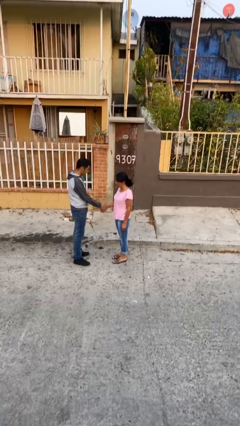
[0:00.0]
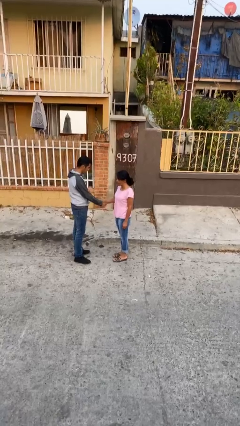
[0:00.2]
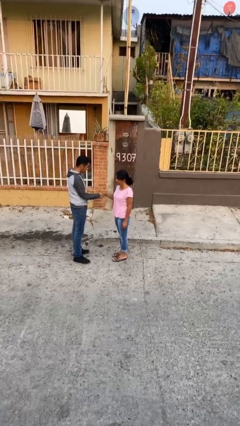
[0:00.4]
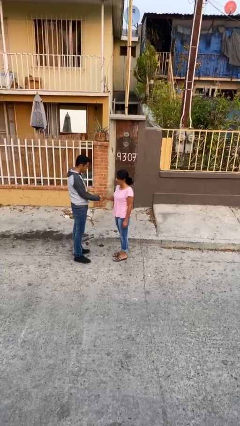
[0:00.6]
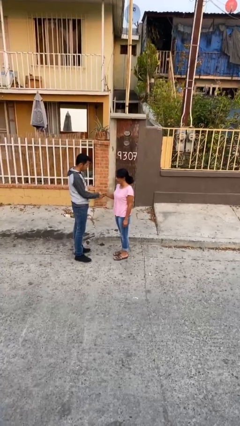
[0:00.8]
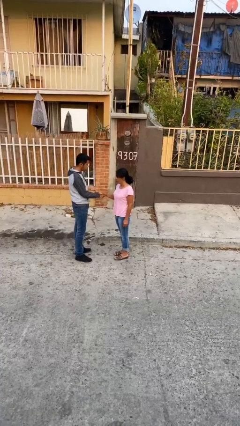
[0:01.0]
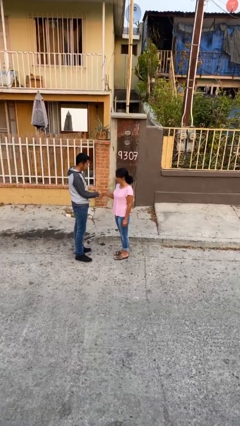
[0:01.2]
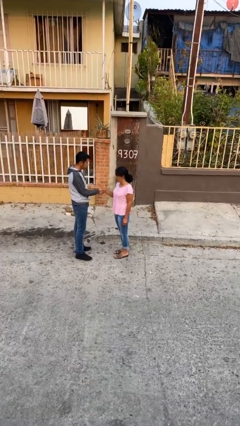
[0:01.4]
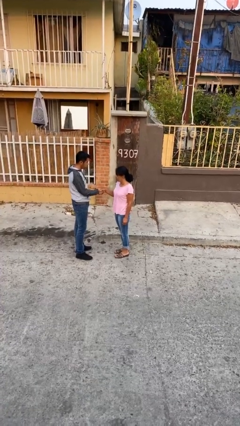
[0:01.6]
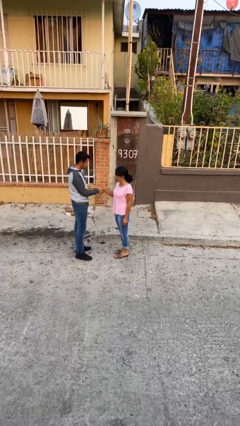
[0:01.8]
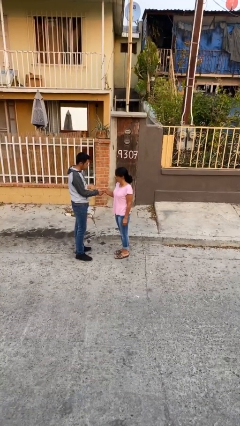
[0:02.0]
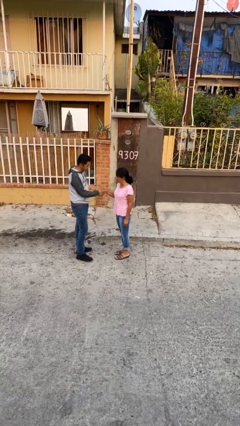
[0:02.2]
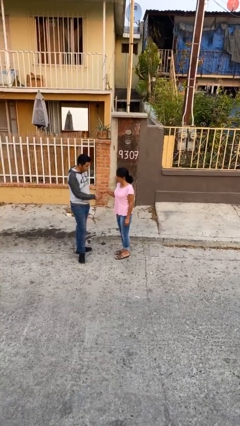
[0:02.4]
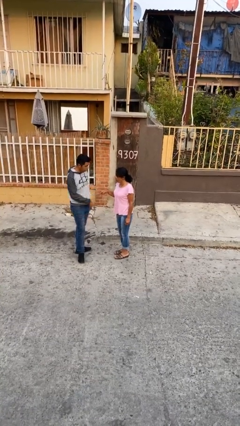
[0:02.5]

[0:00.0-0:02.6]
person shakes hand

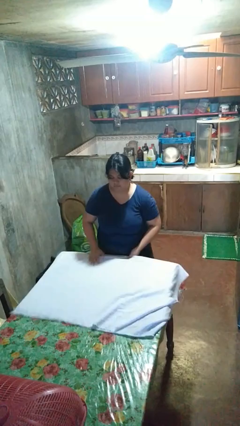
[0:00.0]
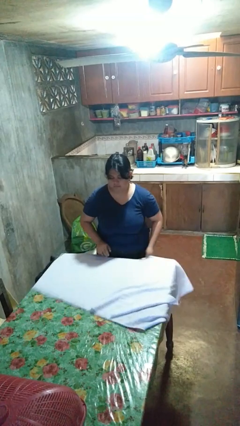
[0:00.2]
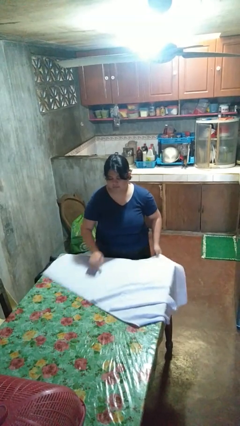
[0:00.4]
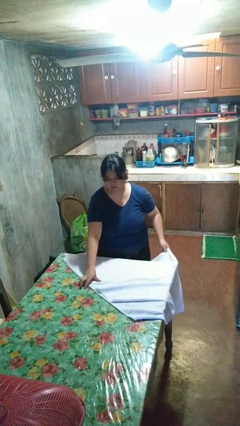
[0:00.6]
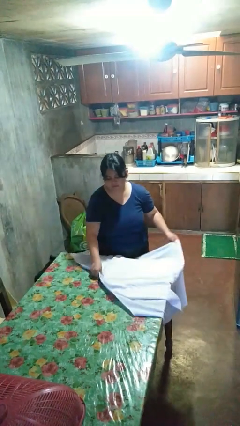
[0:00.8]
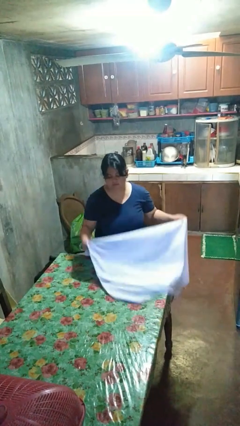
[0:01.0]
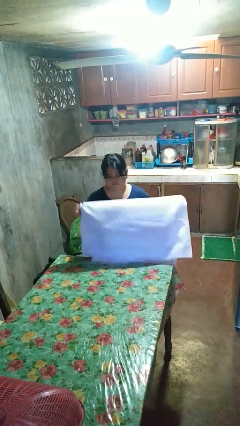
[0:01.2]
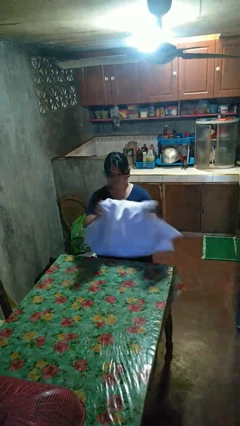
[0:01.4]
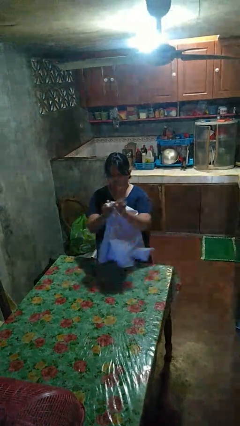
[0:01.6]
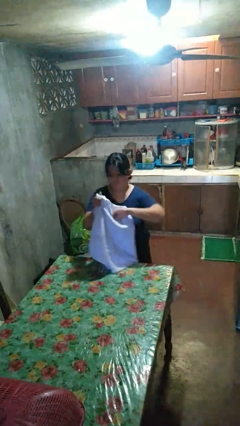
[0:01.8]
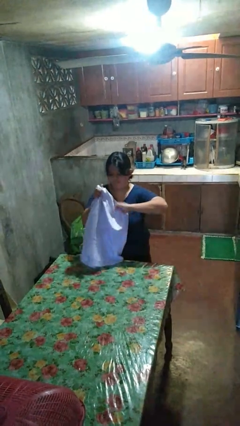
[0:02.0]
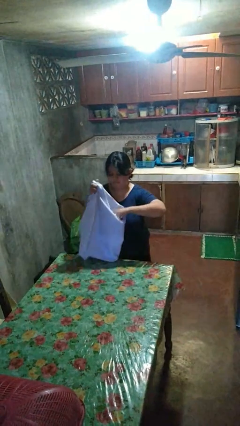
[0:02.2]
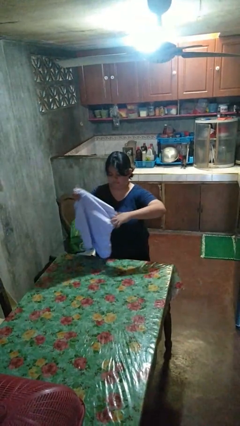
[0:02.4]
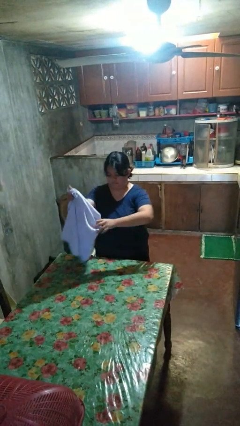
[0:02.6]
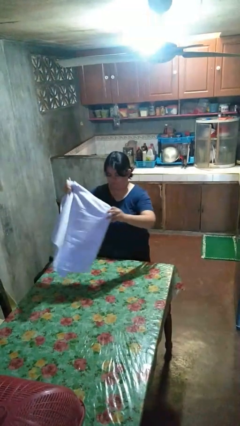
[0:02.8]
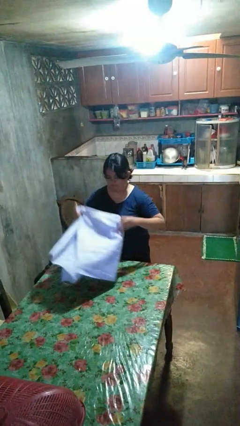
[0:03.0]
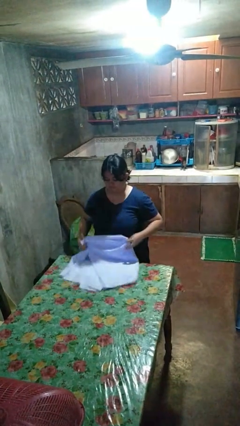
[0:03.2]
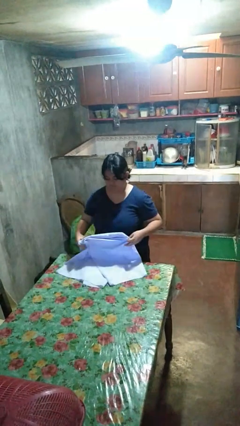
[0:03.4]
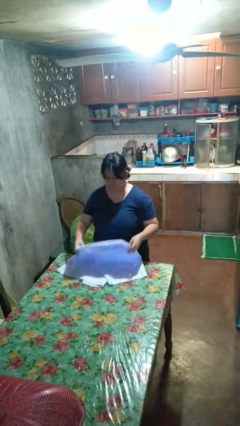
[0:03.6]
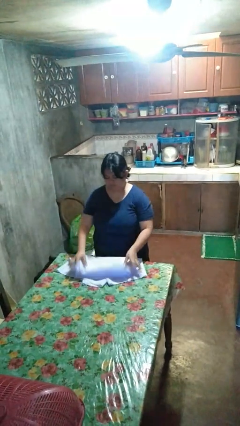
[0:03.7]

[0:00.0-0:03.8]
person folds tablecloth

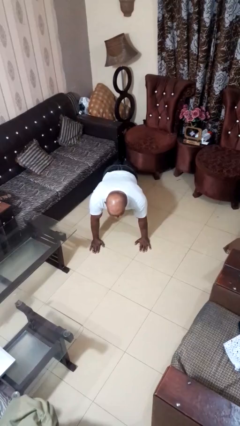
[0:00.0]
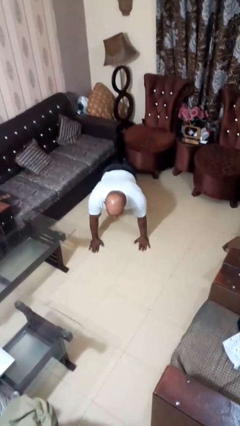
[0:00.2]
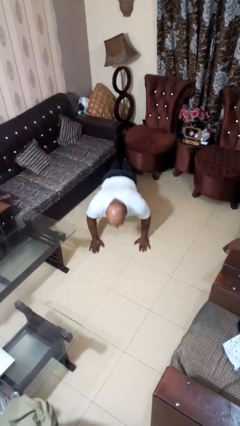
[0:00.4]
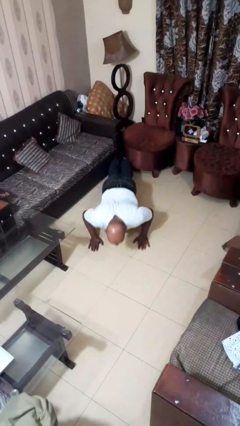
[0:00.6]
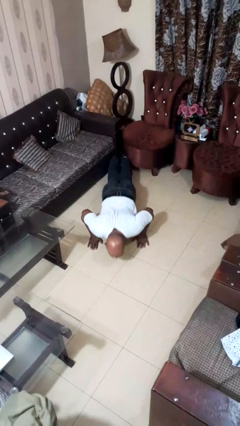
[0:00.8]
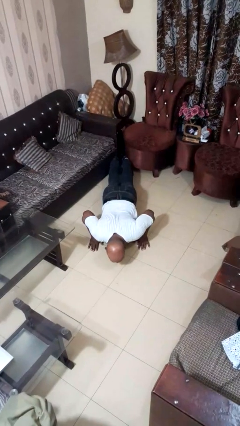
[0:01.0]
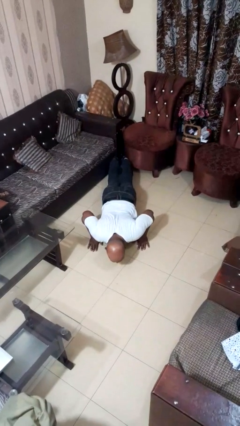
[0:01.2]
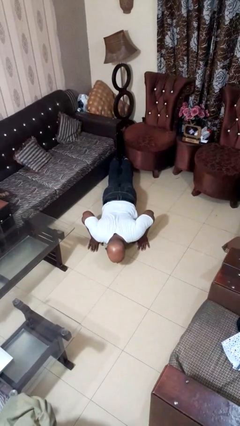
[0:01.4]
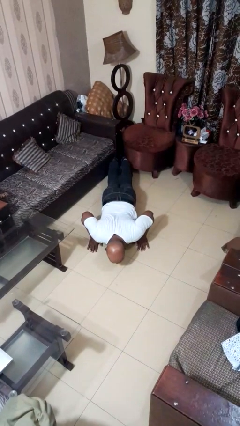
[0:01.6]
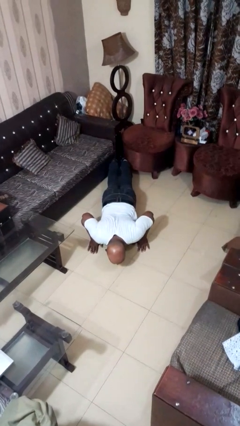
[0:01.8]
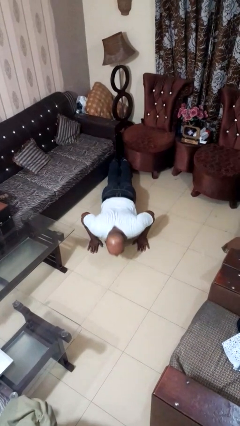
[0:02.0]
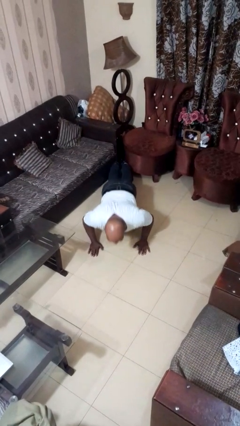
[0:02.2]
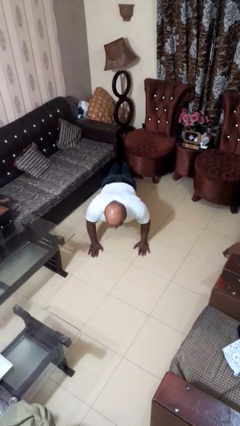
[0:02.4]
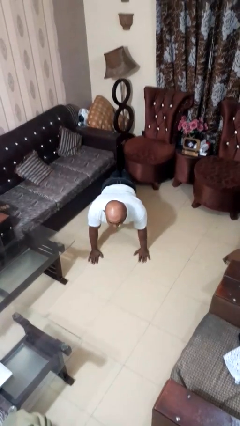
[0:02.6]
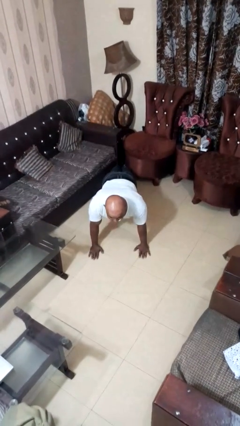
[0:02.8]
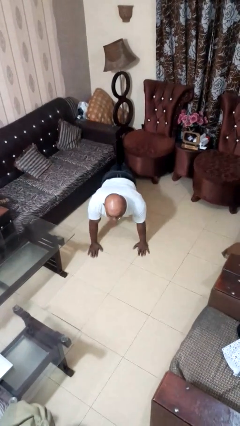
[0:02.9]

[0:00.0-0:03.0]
person exercises with pushup

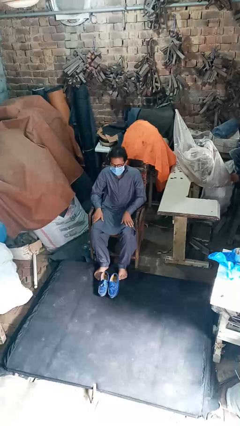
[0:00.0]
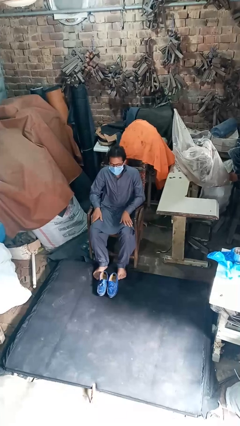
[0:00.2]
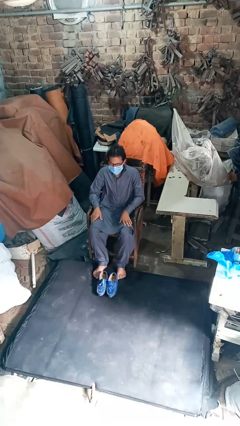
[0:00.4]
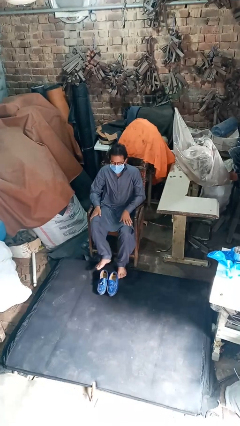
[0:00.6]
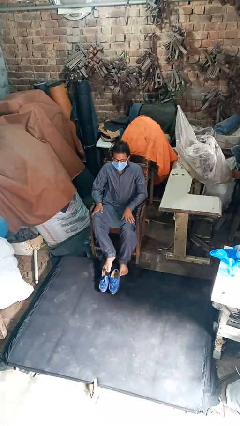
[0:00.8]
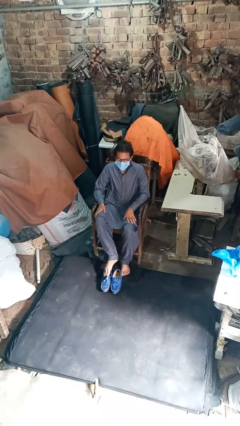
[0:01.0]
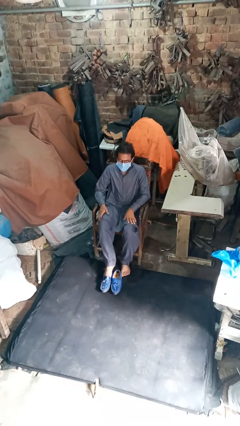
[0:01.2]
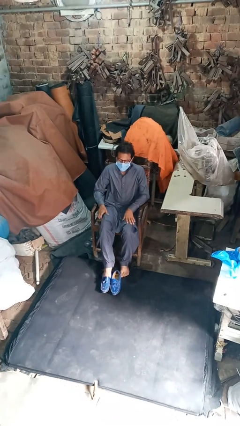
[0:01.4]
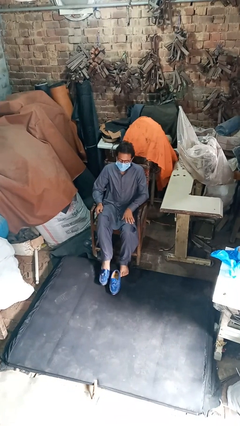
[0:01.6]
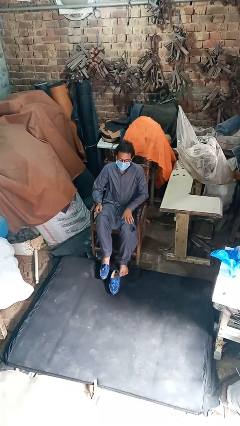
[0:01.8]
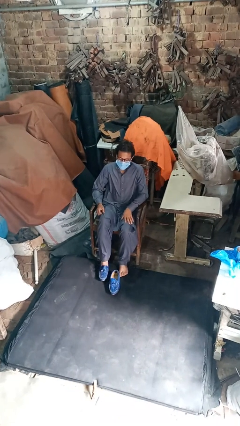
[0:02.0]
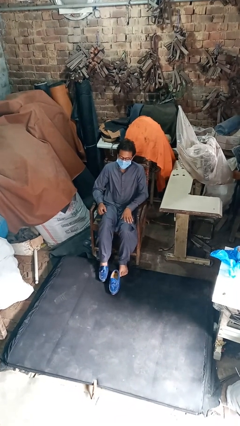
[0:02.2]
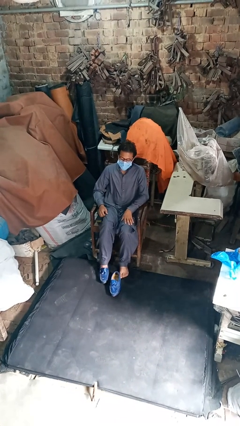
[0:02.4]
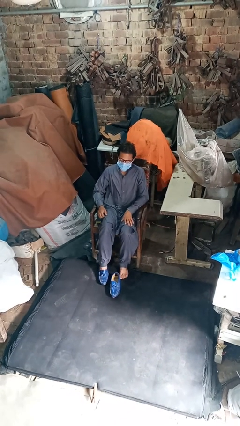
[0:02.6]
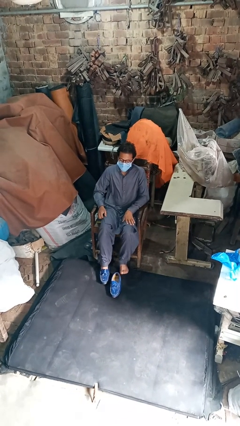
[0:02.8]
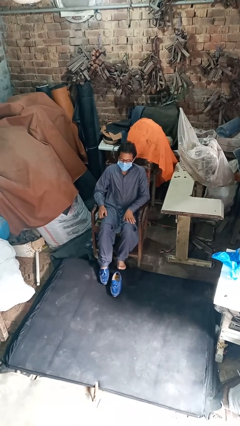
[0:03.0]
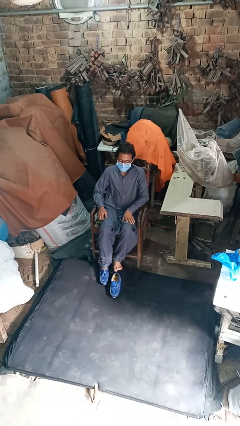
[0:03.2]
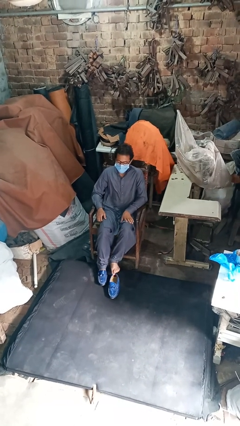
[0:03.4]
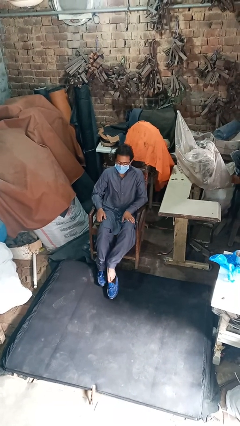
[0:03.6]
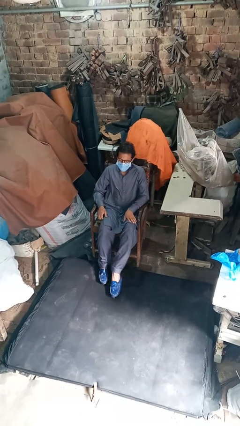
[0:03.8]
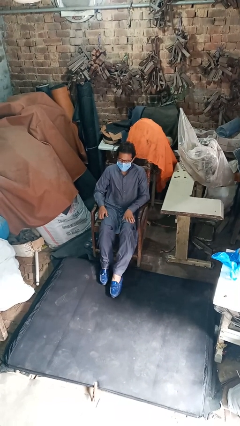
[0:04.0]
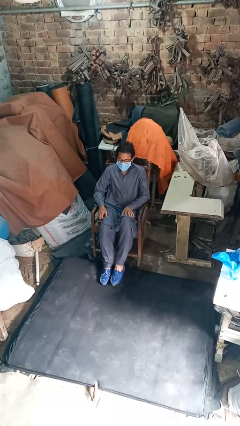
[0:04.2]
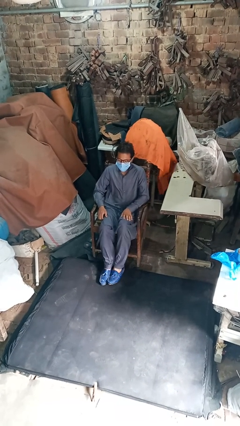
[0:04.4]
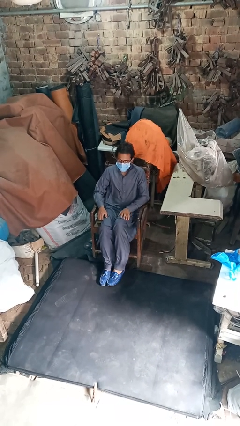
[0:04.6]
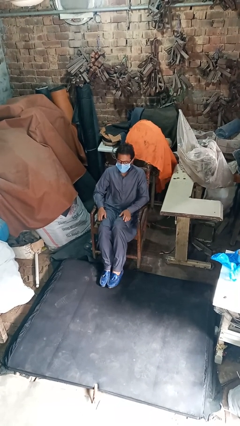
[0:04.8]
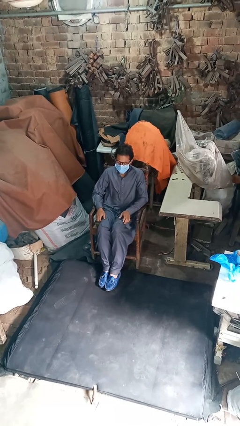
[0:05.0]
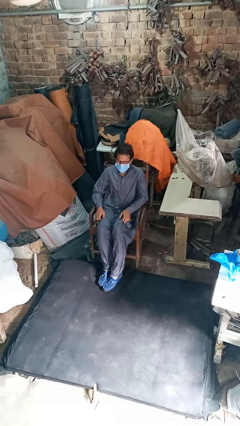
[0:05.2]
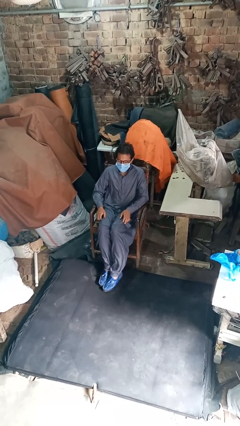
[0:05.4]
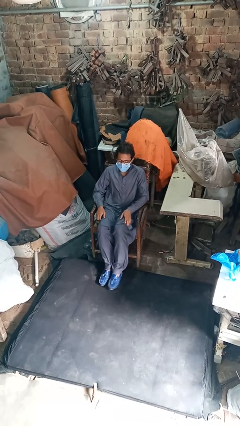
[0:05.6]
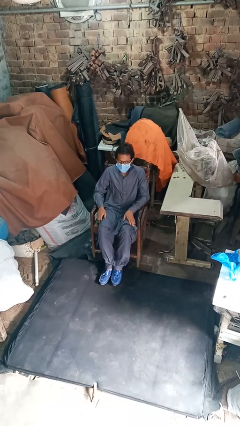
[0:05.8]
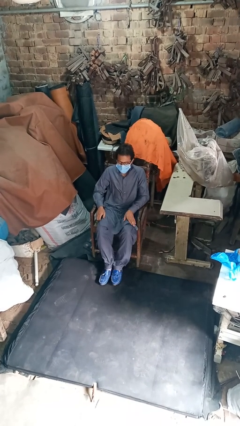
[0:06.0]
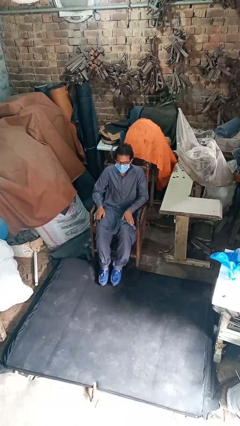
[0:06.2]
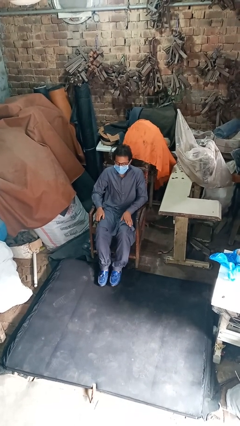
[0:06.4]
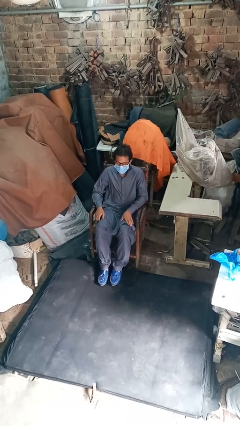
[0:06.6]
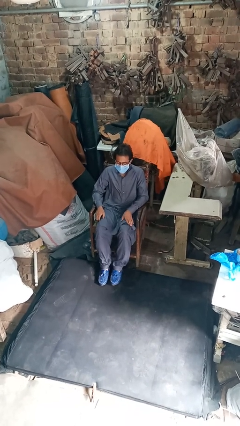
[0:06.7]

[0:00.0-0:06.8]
person puts on shoes

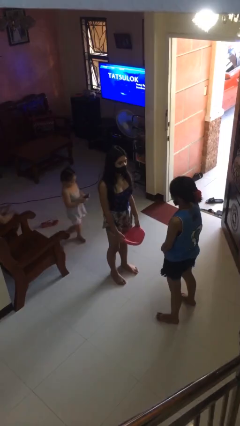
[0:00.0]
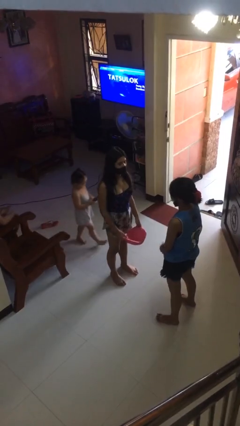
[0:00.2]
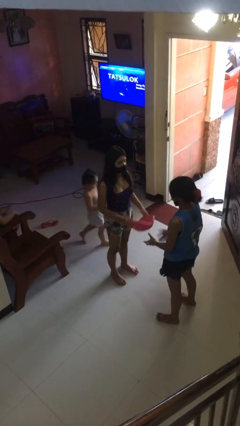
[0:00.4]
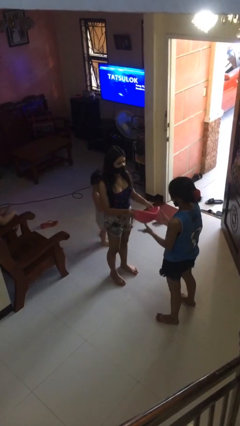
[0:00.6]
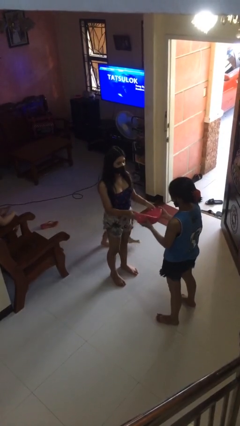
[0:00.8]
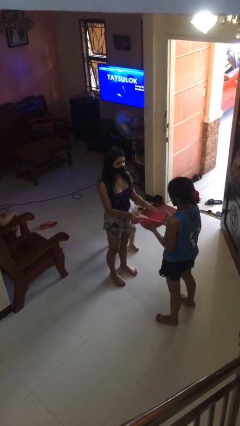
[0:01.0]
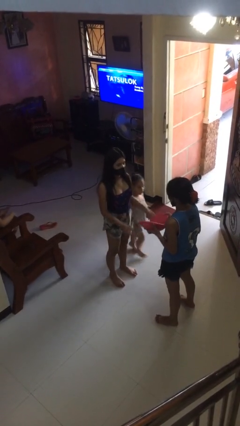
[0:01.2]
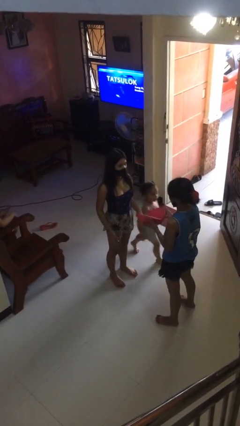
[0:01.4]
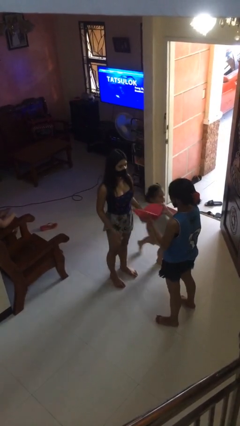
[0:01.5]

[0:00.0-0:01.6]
person transfers object to person
